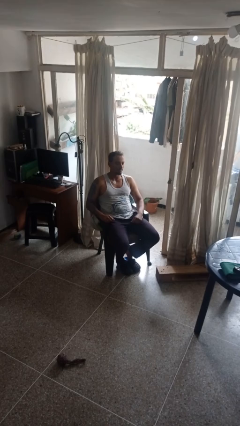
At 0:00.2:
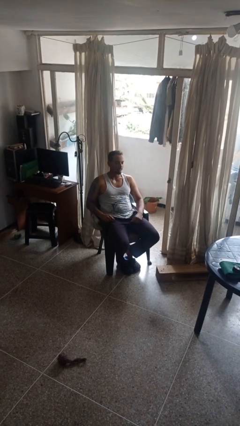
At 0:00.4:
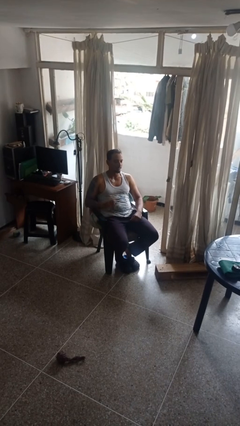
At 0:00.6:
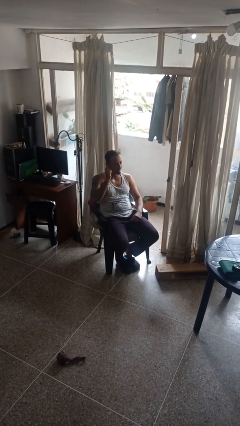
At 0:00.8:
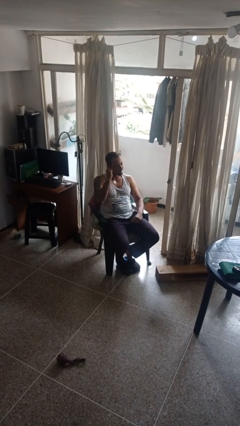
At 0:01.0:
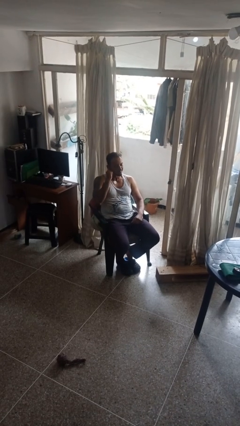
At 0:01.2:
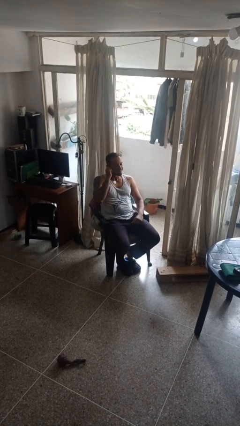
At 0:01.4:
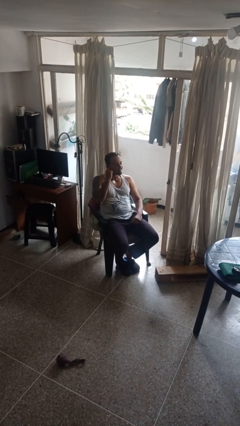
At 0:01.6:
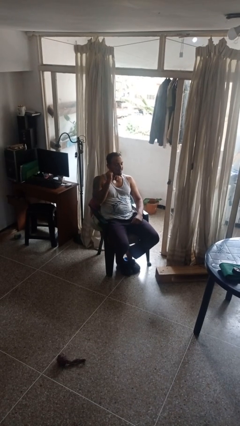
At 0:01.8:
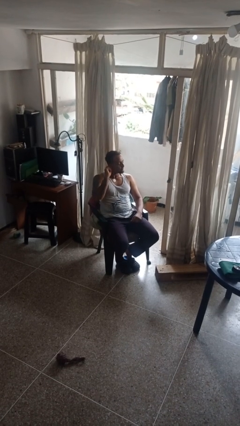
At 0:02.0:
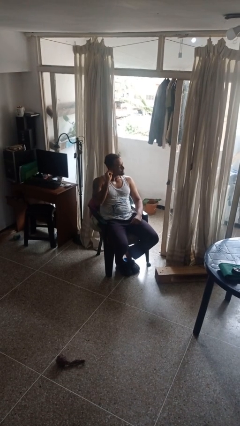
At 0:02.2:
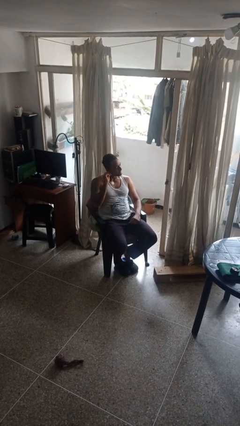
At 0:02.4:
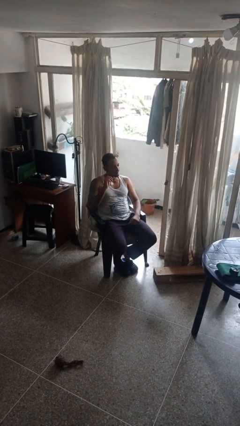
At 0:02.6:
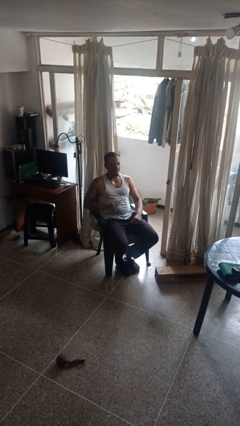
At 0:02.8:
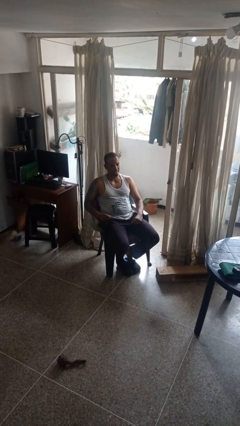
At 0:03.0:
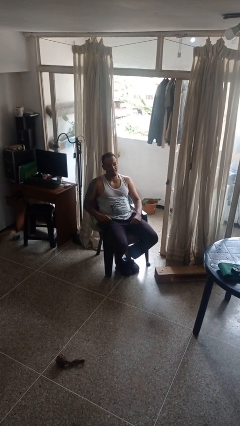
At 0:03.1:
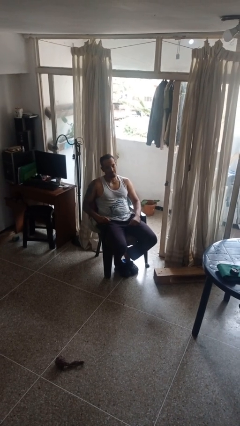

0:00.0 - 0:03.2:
person touches earlobe

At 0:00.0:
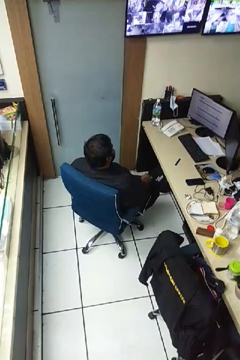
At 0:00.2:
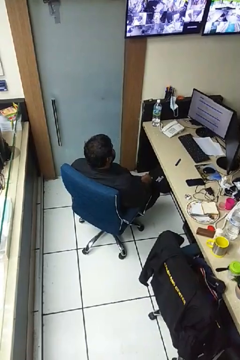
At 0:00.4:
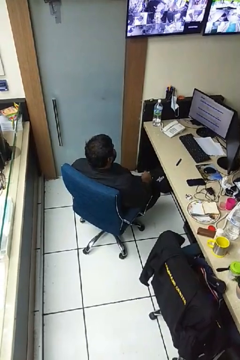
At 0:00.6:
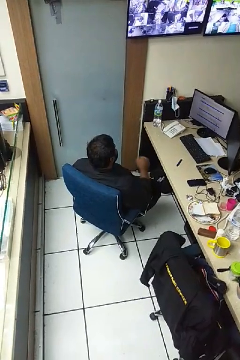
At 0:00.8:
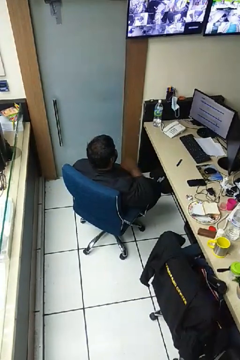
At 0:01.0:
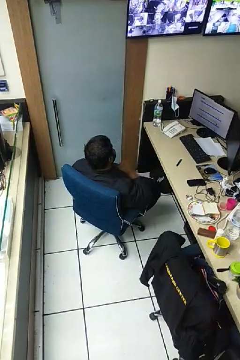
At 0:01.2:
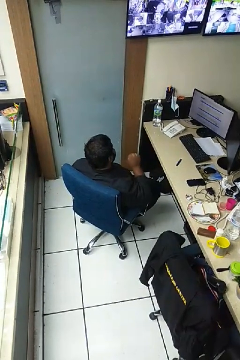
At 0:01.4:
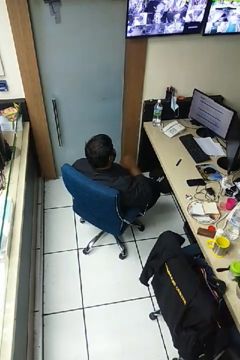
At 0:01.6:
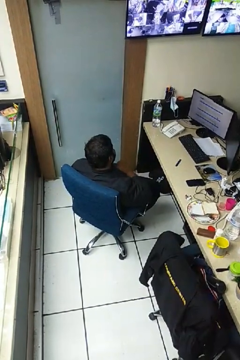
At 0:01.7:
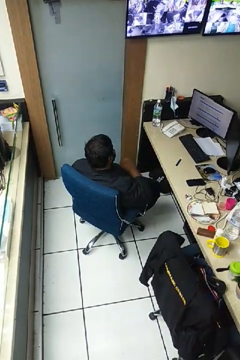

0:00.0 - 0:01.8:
person drums on chest

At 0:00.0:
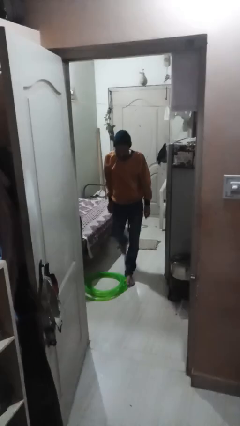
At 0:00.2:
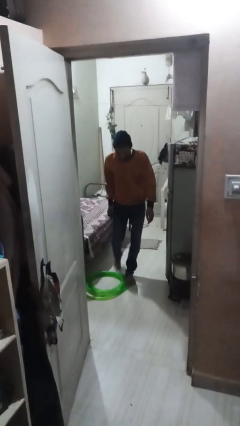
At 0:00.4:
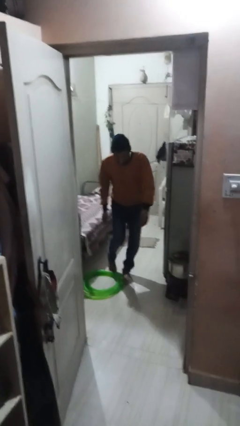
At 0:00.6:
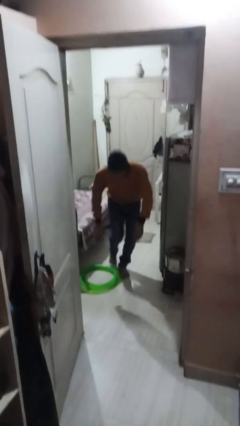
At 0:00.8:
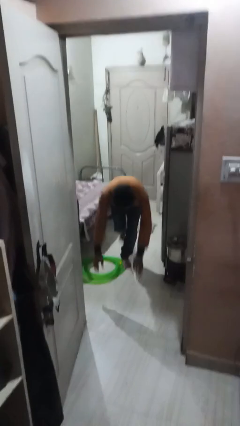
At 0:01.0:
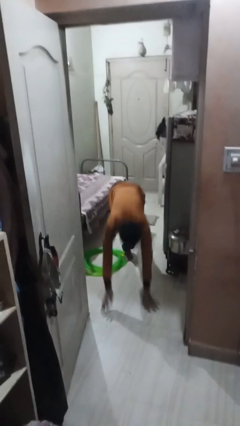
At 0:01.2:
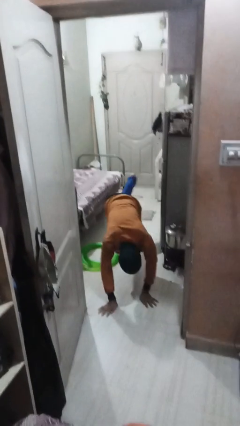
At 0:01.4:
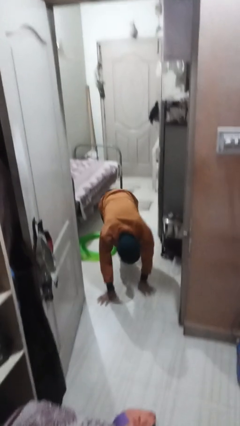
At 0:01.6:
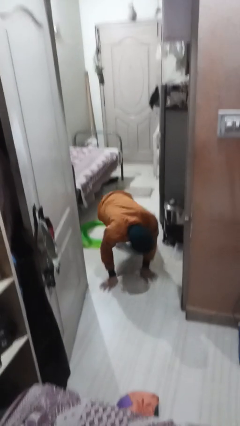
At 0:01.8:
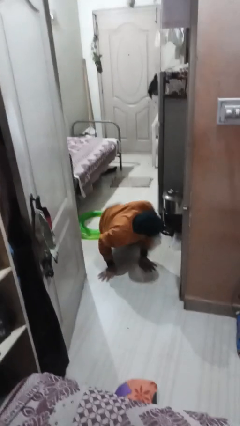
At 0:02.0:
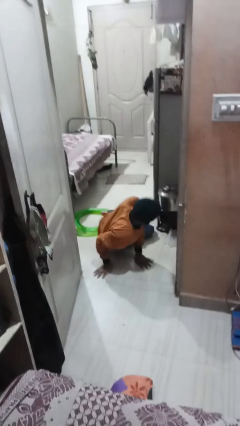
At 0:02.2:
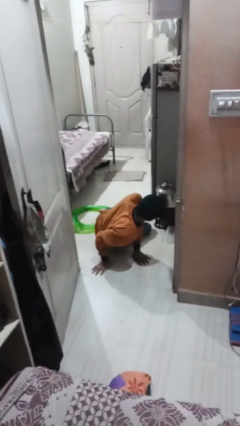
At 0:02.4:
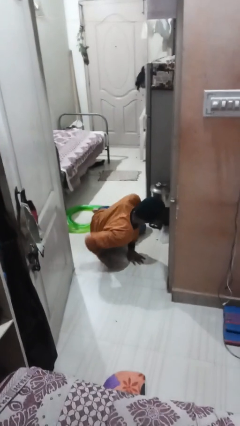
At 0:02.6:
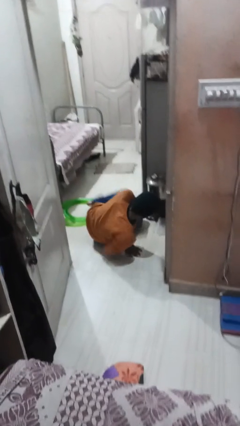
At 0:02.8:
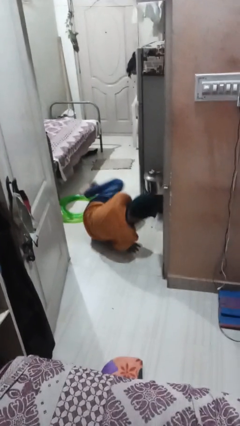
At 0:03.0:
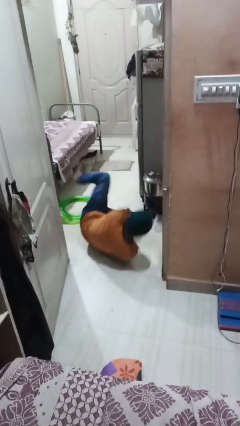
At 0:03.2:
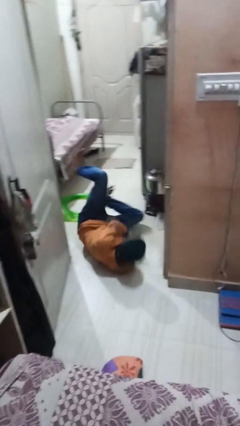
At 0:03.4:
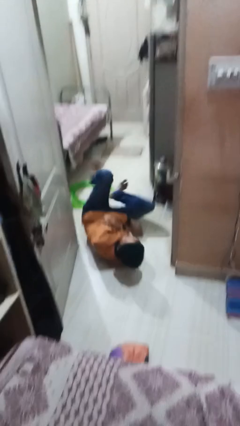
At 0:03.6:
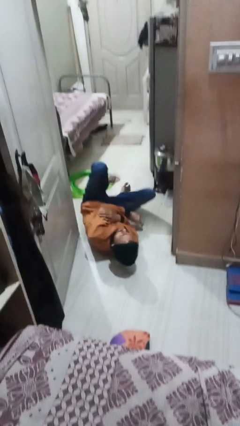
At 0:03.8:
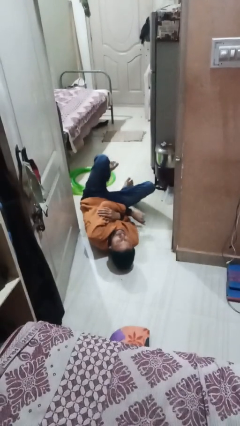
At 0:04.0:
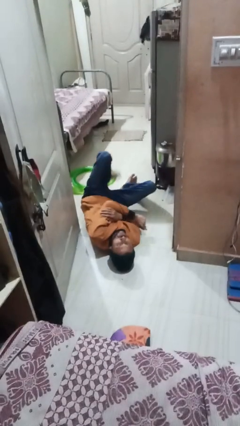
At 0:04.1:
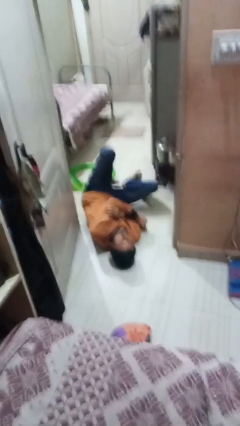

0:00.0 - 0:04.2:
person trips on object on floor

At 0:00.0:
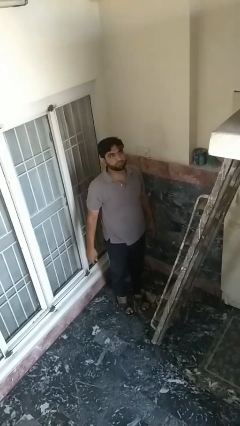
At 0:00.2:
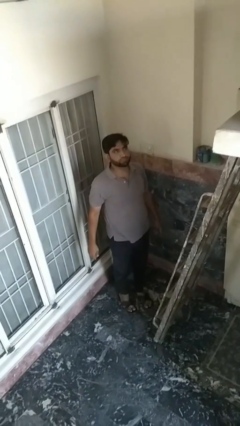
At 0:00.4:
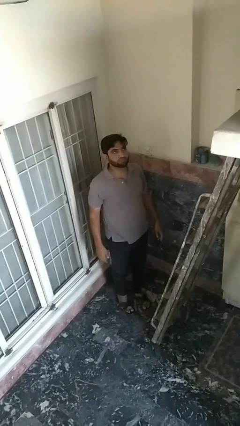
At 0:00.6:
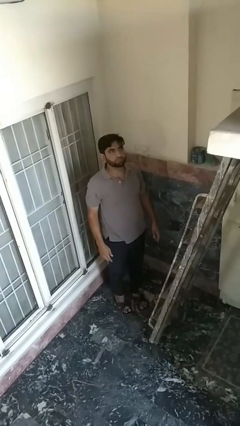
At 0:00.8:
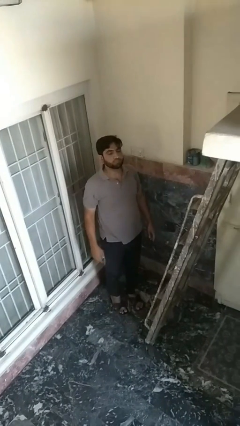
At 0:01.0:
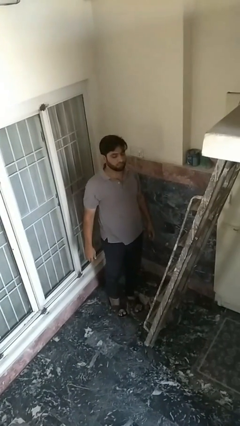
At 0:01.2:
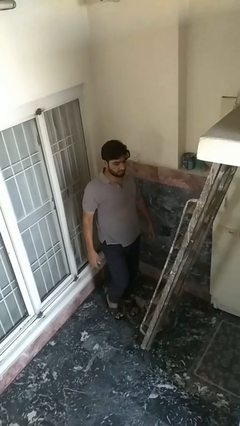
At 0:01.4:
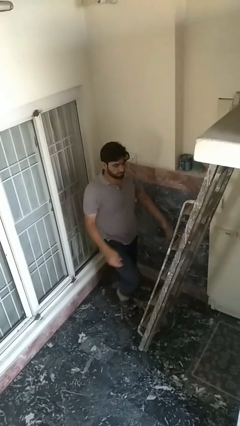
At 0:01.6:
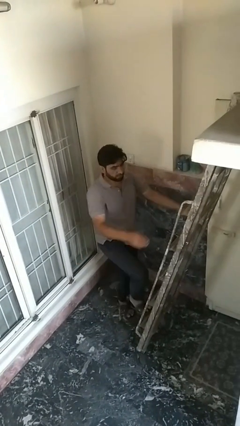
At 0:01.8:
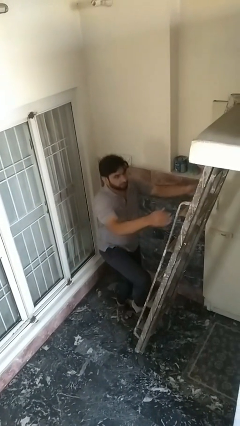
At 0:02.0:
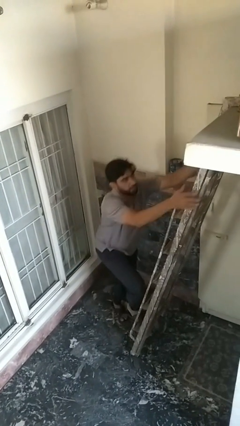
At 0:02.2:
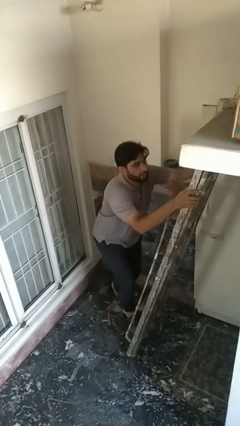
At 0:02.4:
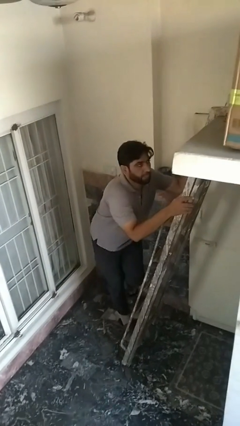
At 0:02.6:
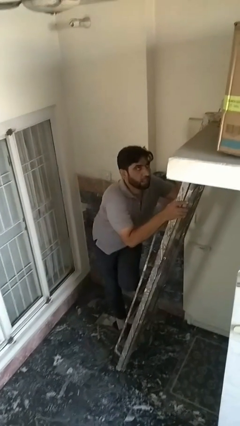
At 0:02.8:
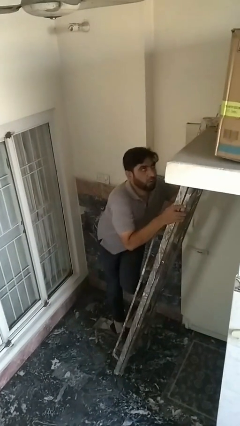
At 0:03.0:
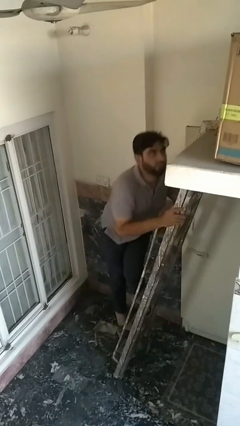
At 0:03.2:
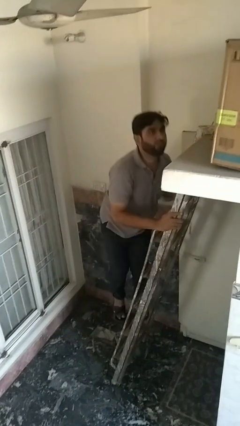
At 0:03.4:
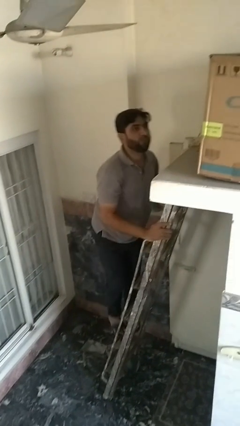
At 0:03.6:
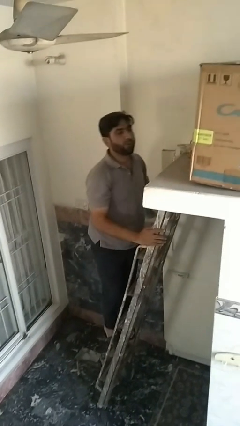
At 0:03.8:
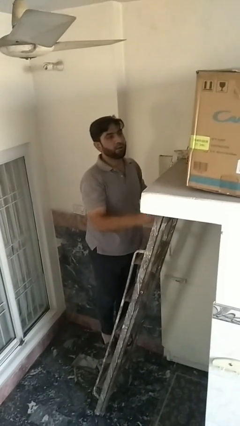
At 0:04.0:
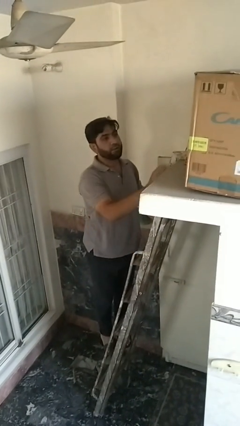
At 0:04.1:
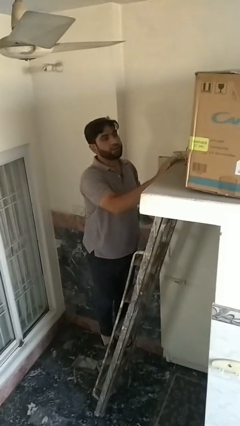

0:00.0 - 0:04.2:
person climbs up ladder

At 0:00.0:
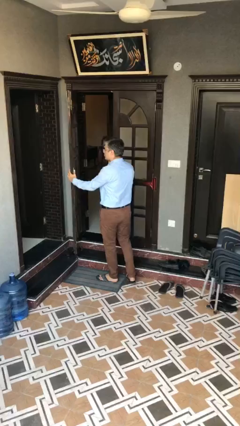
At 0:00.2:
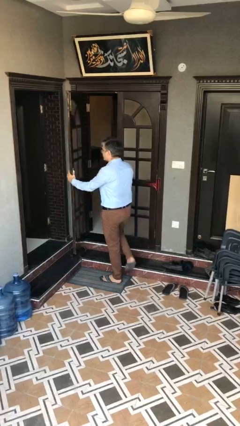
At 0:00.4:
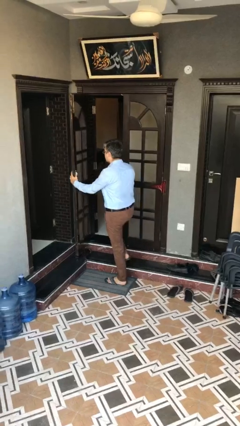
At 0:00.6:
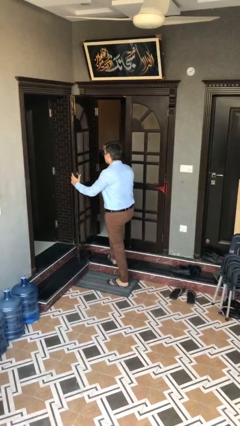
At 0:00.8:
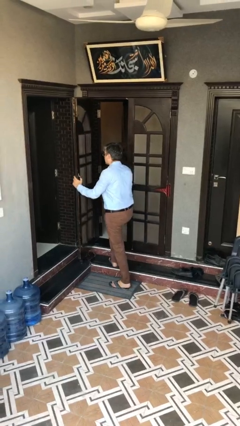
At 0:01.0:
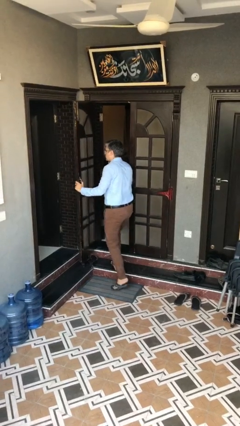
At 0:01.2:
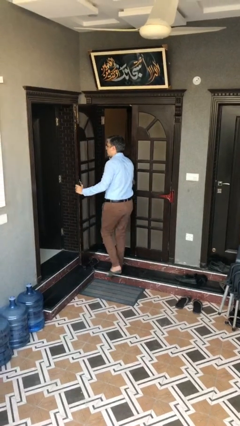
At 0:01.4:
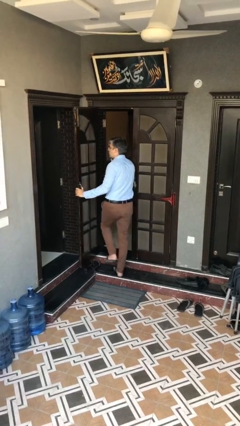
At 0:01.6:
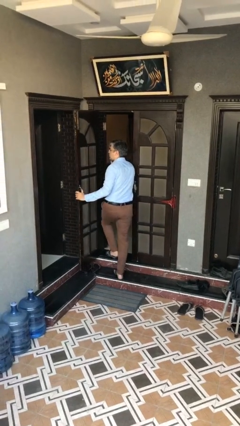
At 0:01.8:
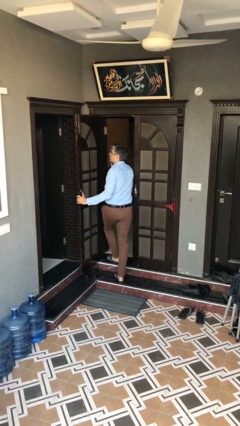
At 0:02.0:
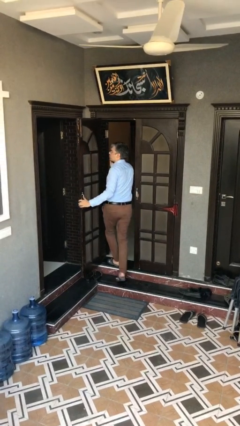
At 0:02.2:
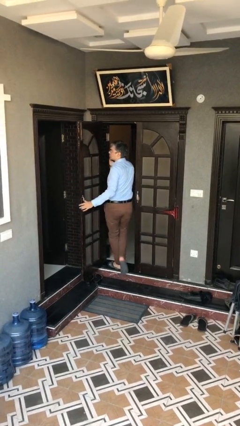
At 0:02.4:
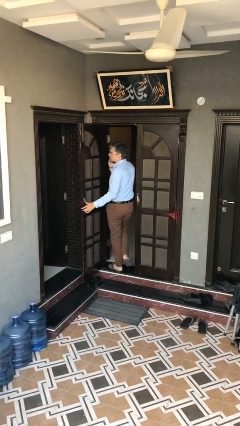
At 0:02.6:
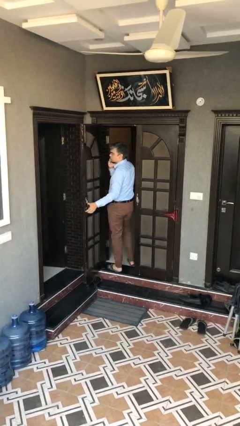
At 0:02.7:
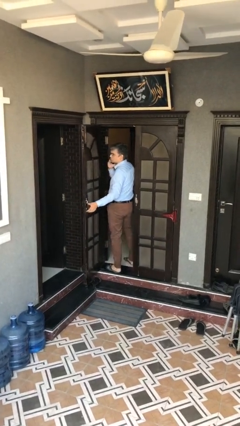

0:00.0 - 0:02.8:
person exits scene through structure

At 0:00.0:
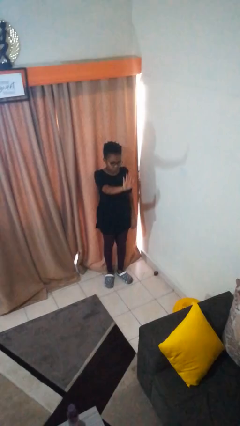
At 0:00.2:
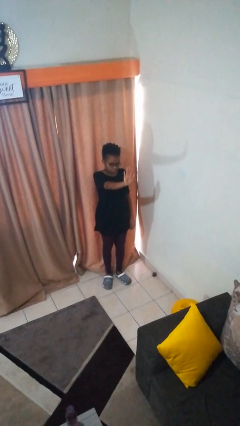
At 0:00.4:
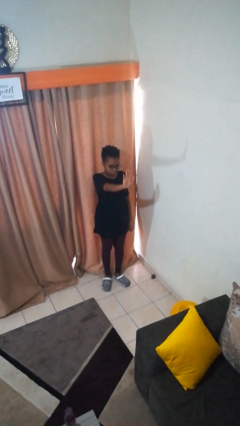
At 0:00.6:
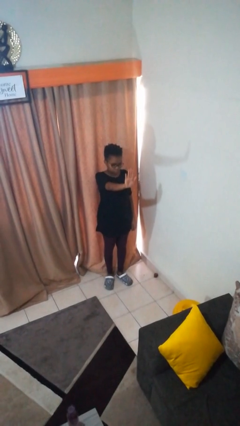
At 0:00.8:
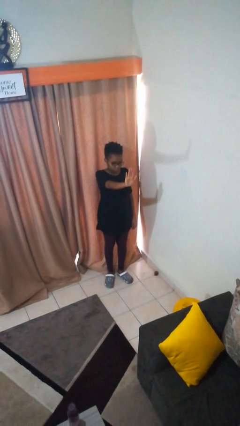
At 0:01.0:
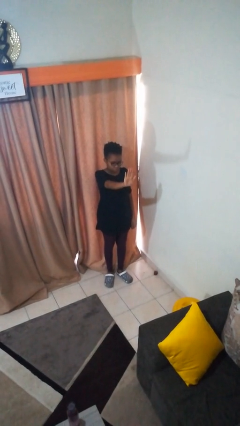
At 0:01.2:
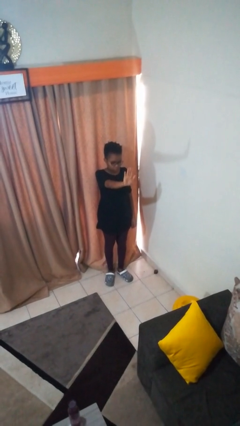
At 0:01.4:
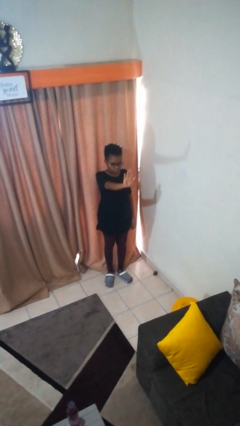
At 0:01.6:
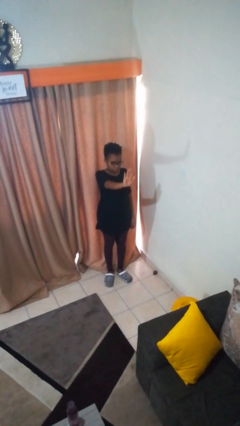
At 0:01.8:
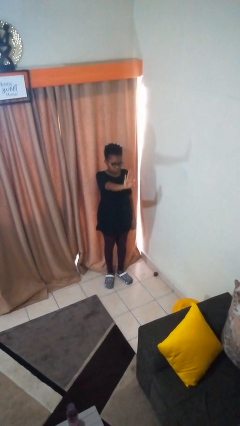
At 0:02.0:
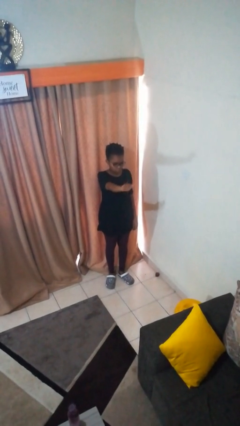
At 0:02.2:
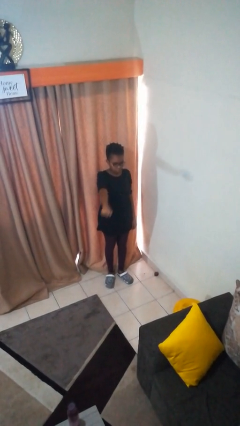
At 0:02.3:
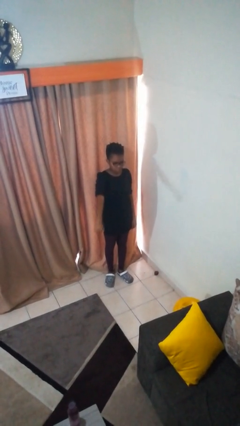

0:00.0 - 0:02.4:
person gestures stop
